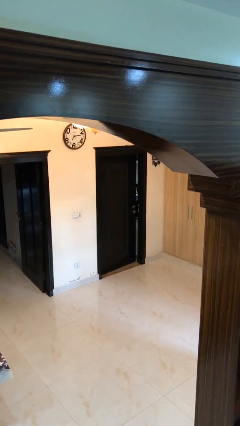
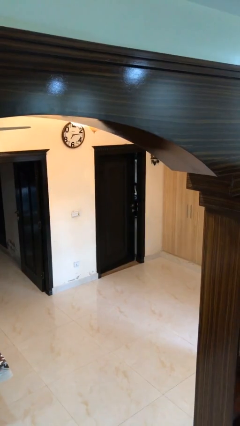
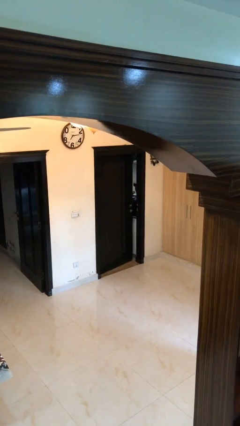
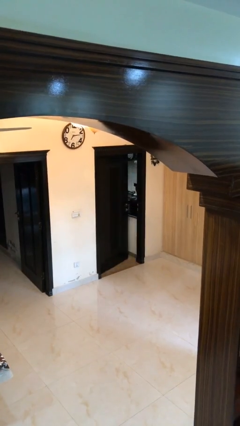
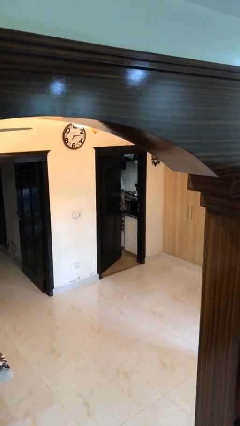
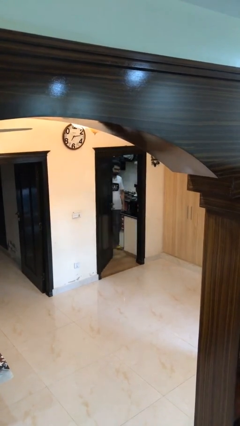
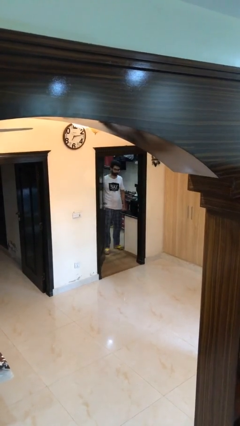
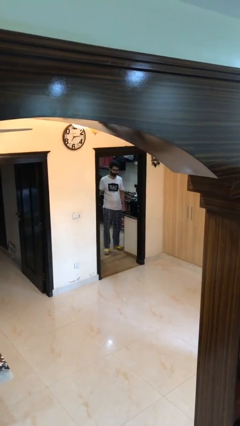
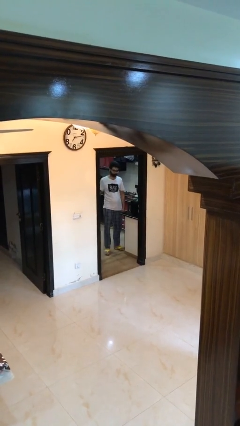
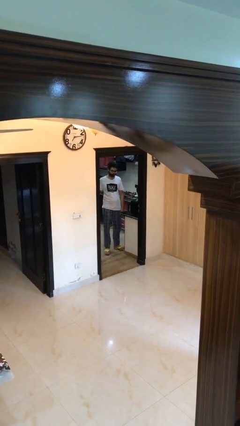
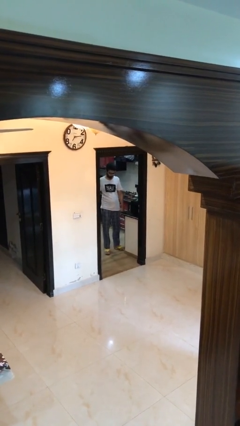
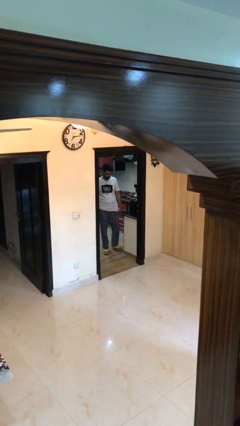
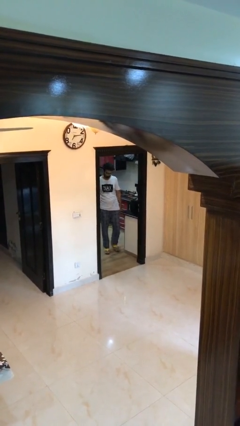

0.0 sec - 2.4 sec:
person opens facility door

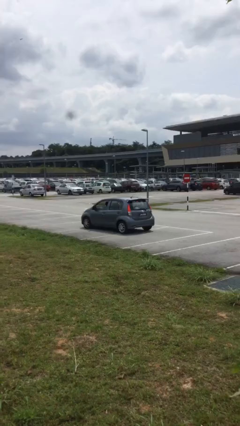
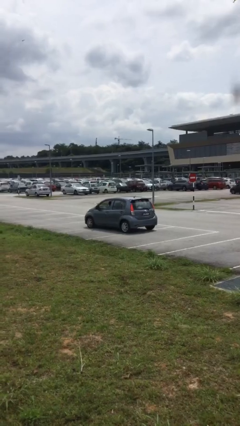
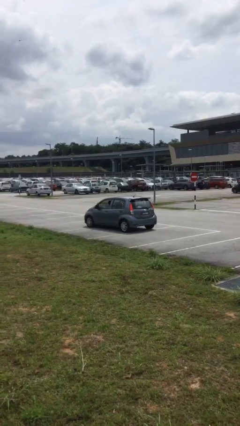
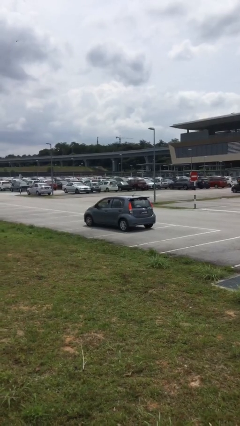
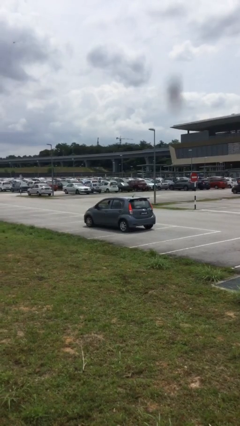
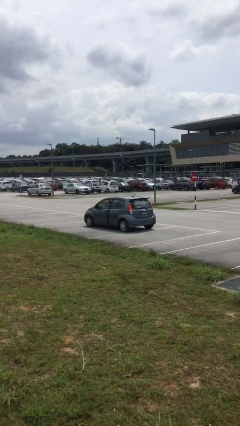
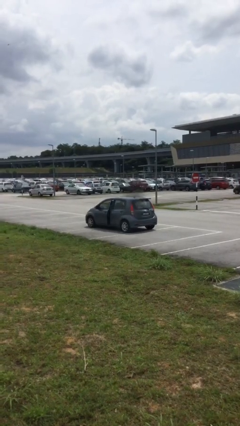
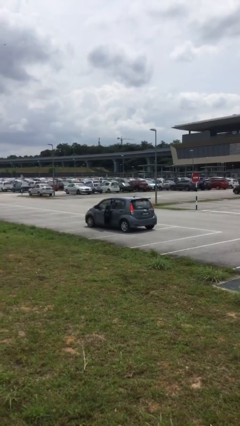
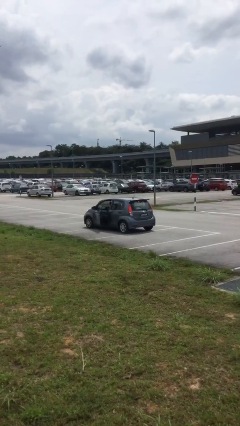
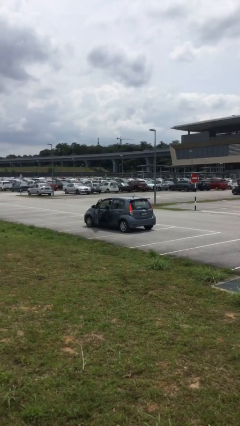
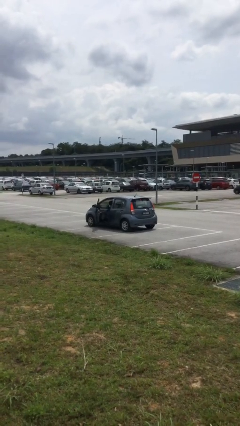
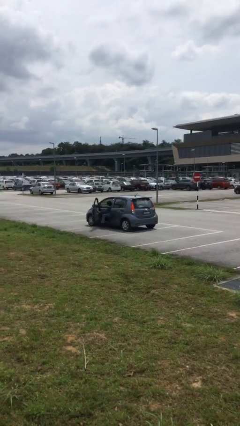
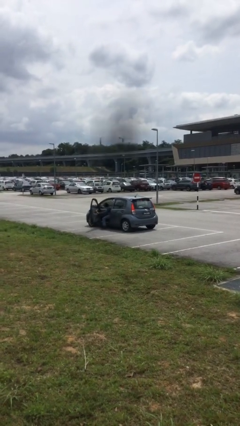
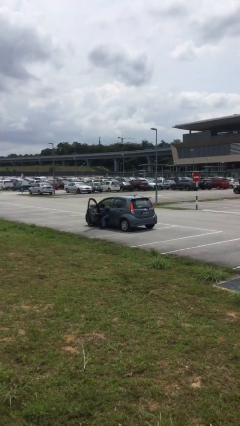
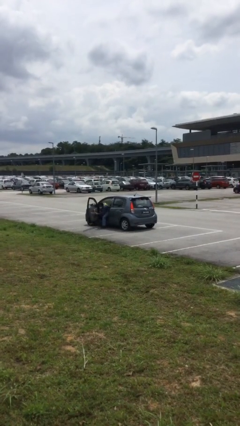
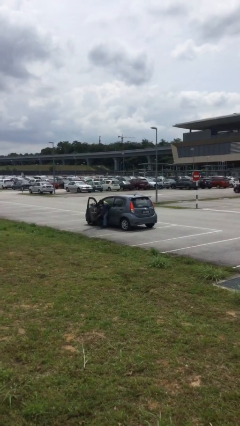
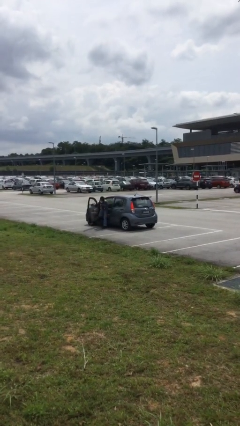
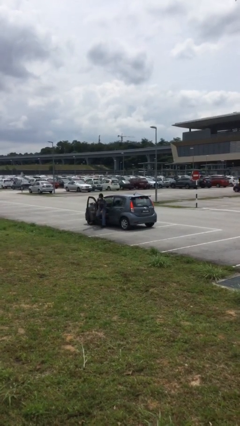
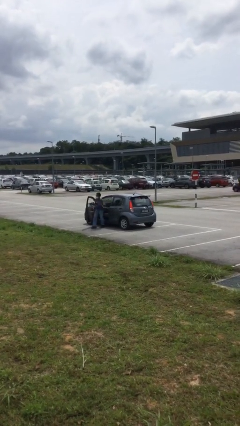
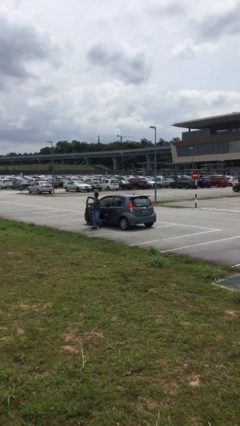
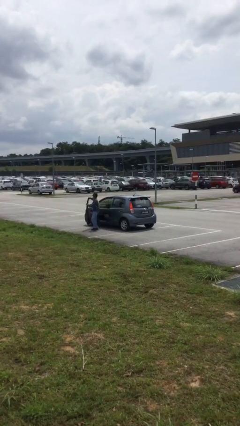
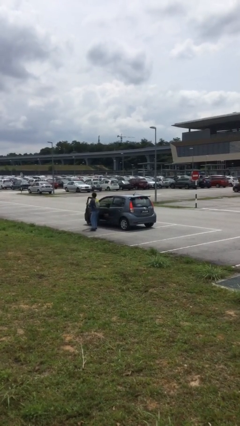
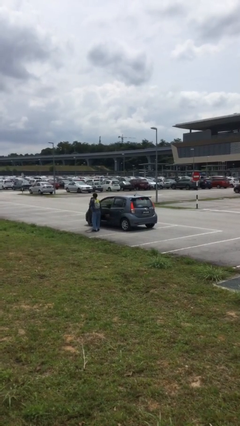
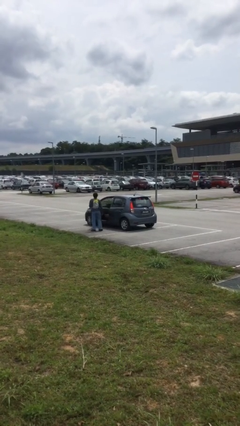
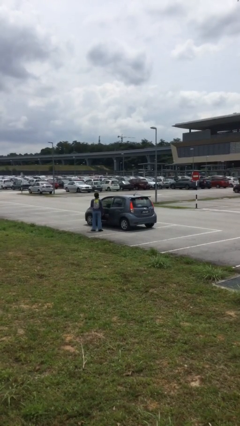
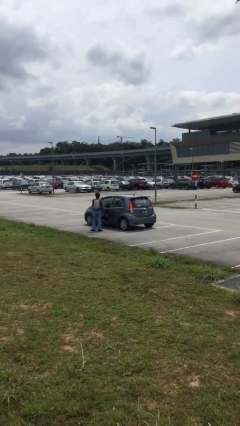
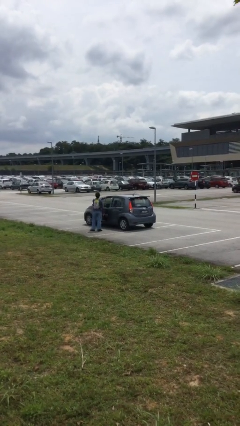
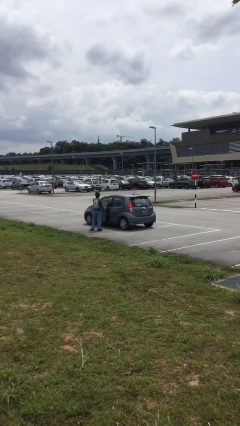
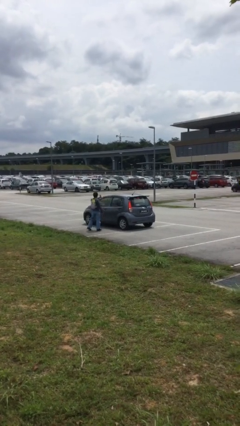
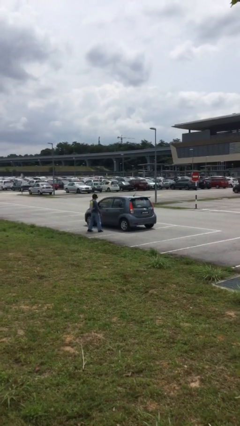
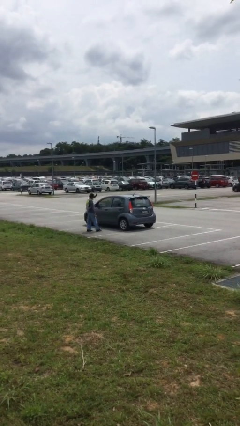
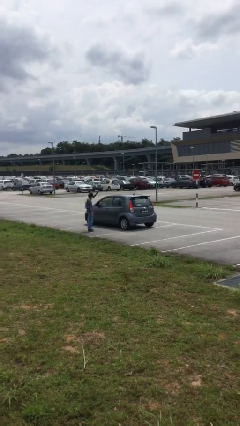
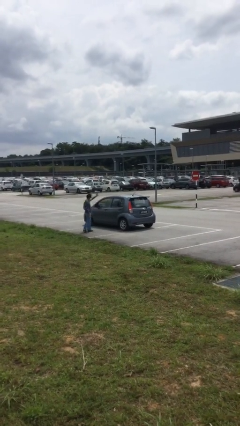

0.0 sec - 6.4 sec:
car drops off person

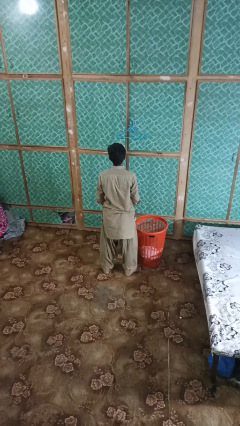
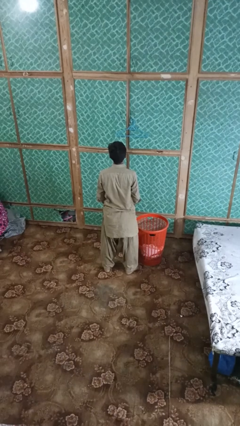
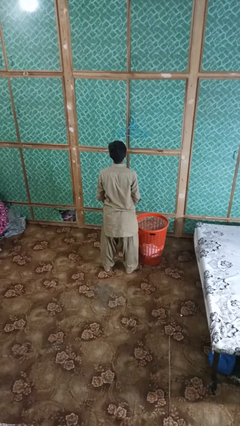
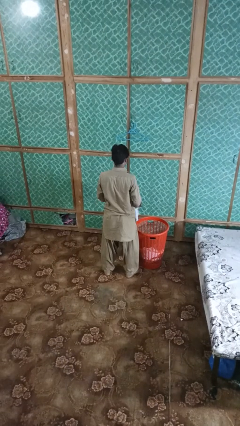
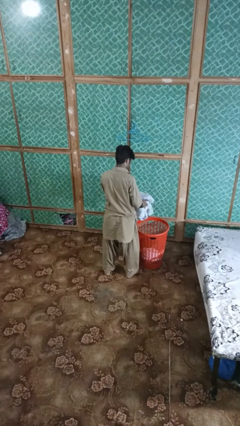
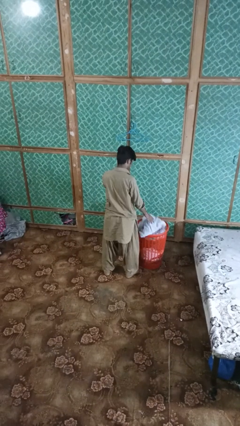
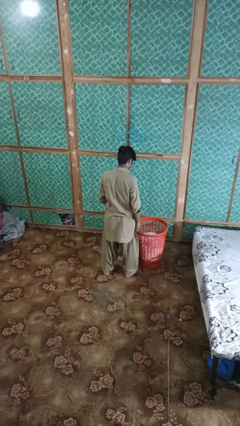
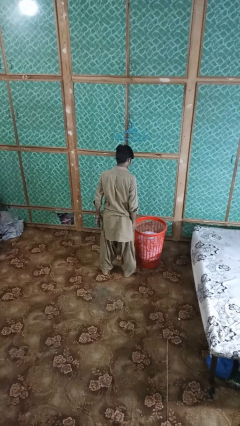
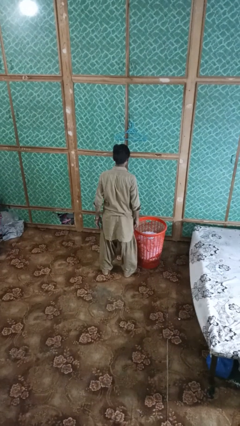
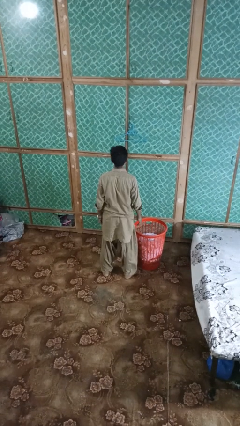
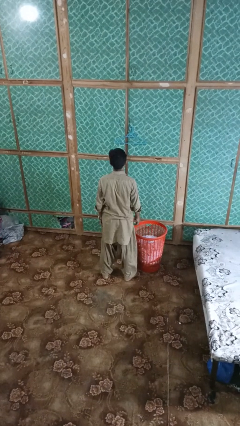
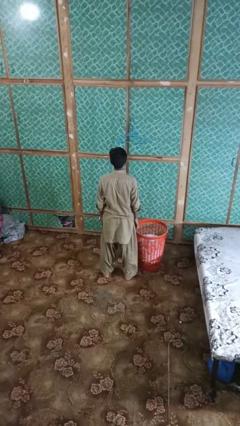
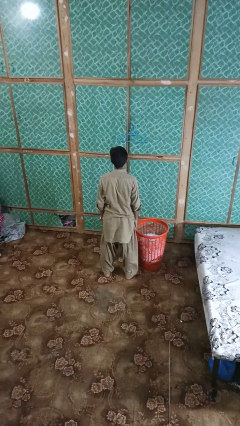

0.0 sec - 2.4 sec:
person puts object into basket

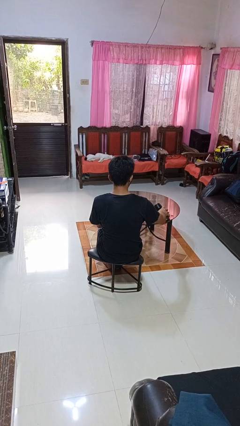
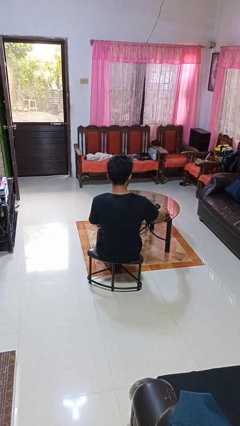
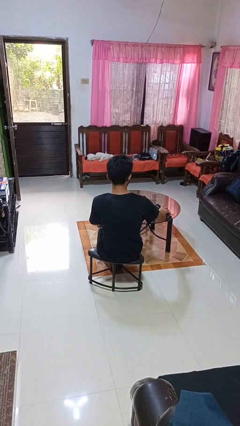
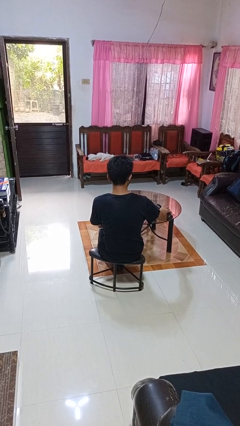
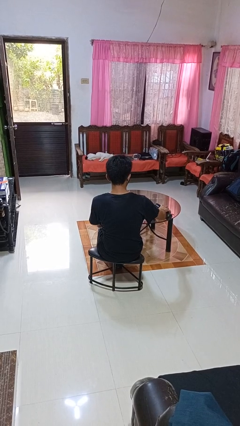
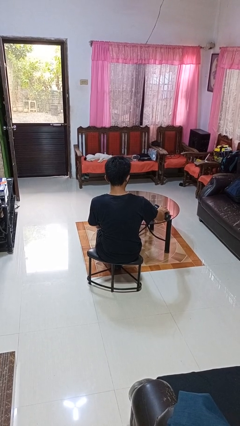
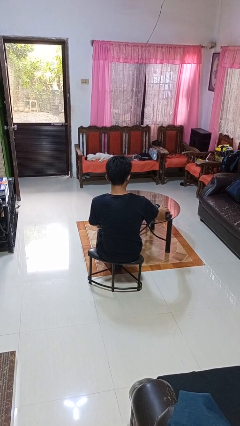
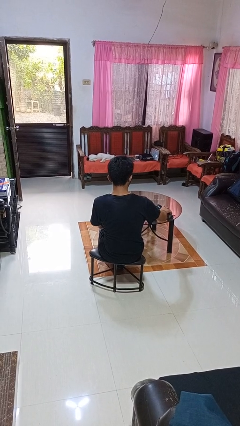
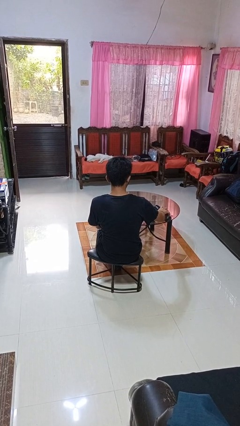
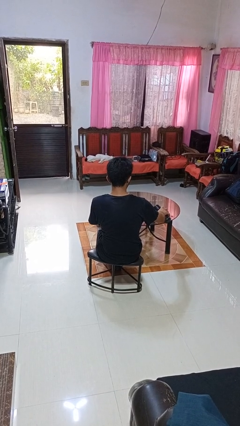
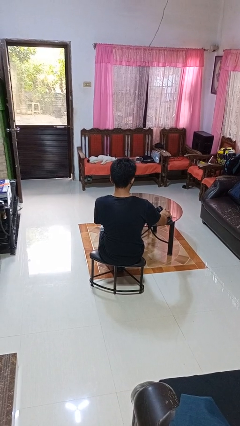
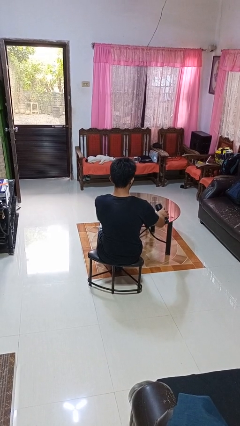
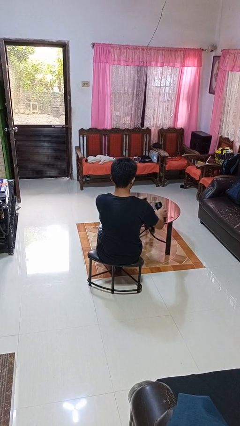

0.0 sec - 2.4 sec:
person pours liquid into cup

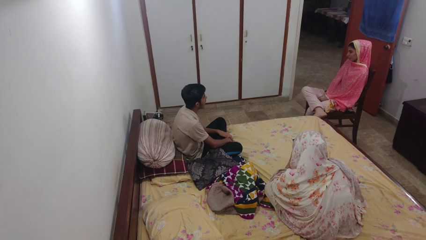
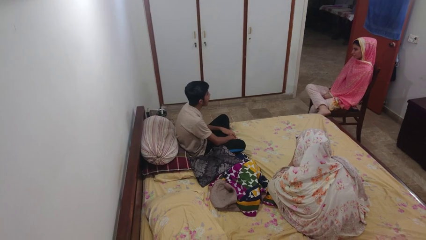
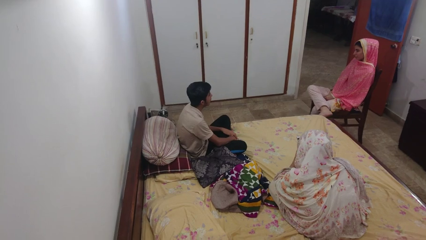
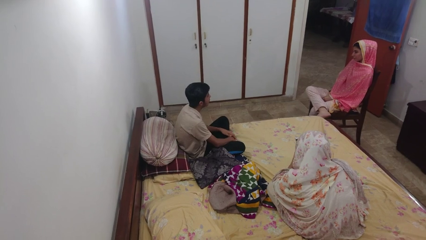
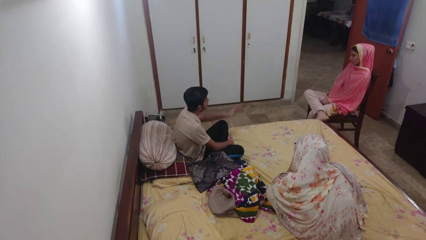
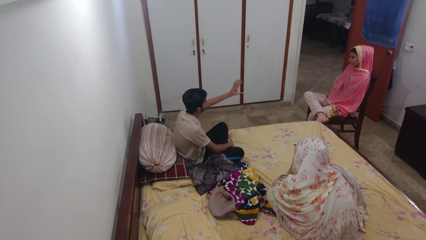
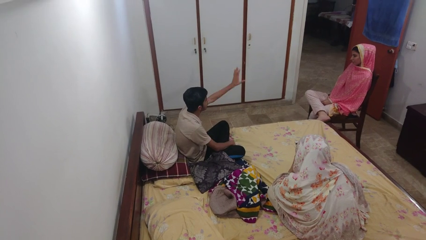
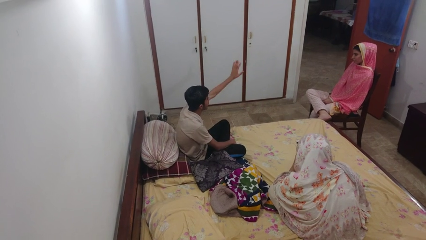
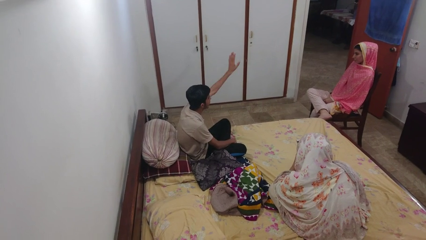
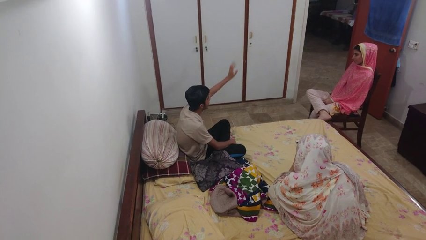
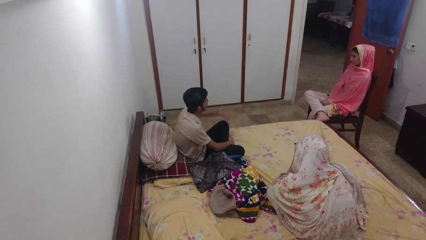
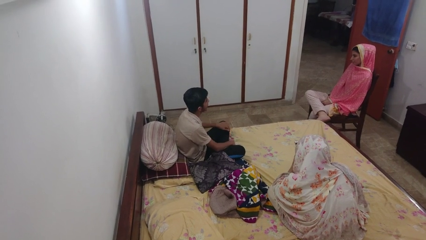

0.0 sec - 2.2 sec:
person waves at person

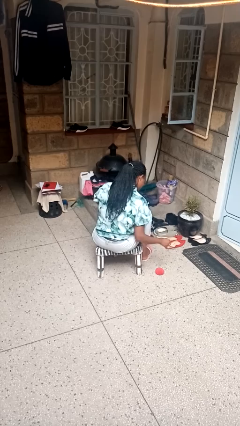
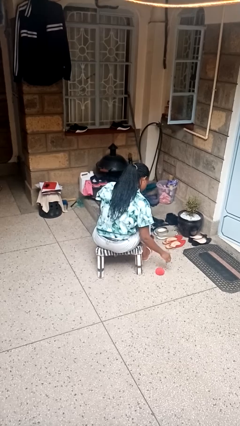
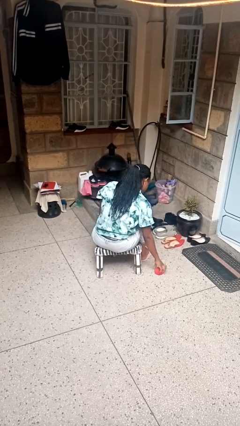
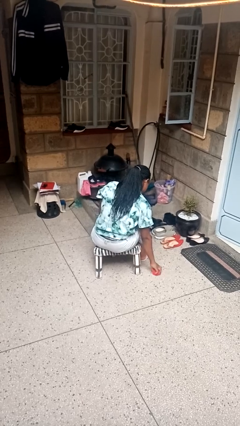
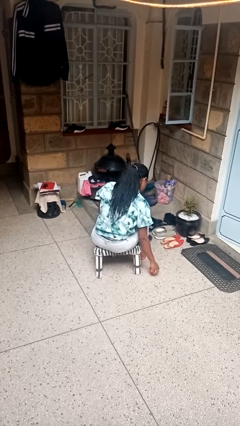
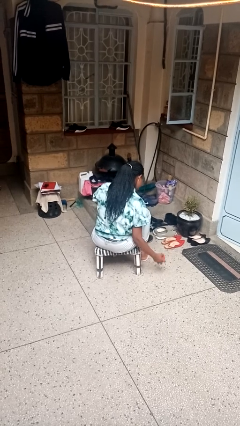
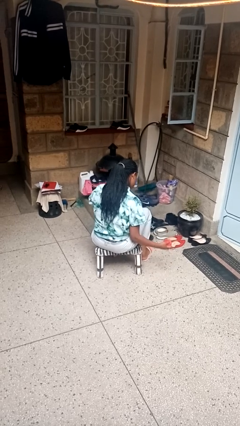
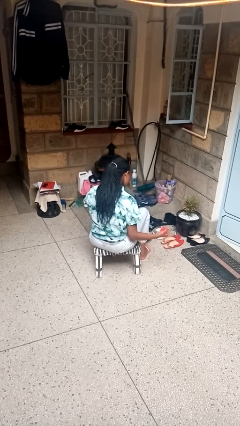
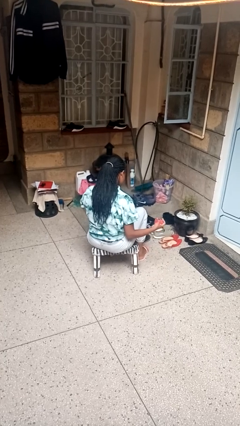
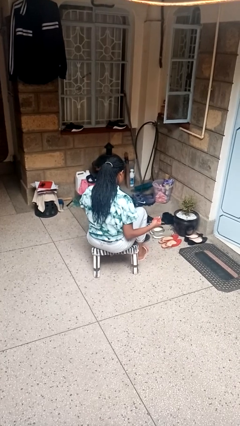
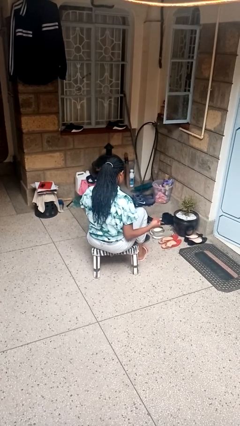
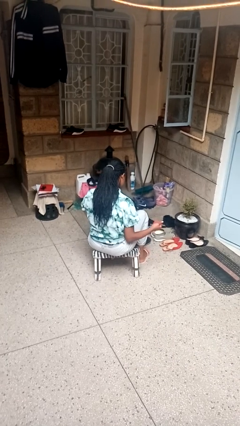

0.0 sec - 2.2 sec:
person picks up object from floor
